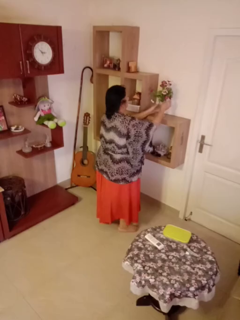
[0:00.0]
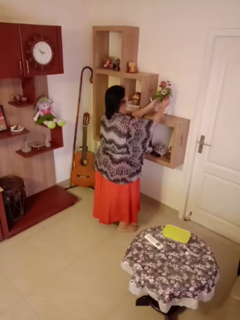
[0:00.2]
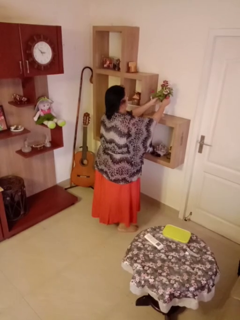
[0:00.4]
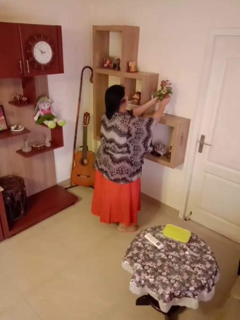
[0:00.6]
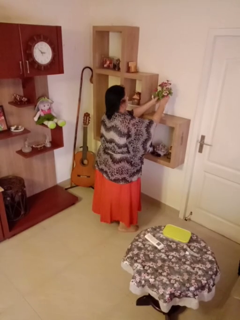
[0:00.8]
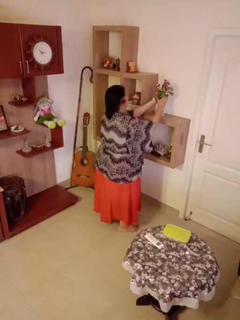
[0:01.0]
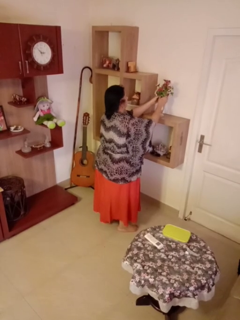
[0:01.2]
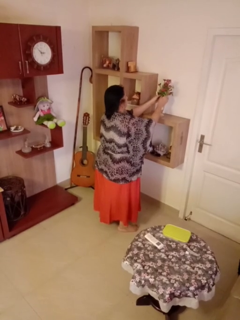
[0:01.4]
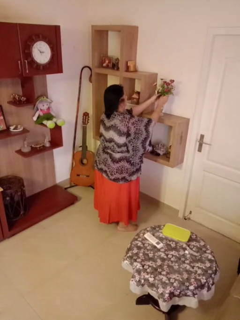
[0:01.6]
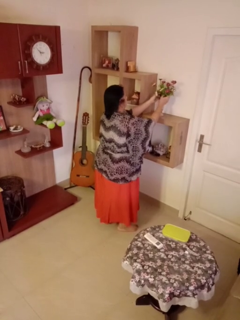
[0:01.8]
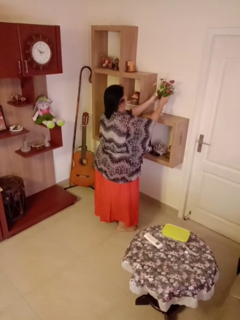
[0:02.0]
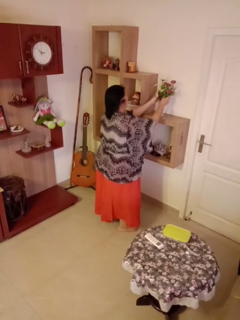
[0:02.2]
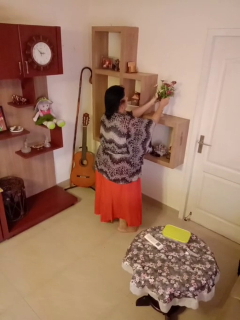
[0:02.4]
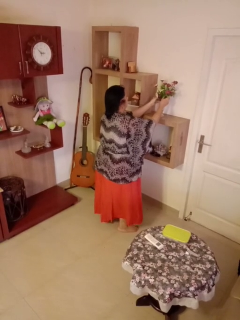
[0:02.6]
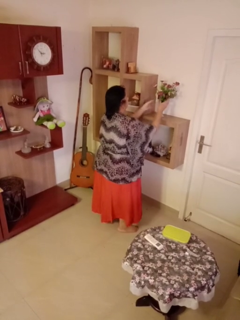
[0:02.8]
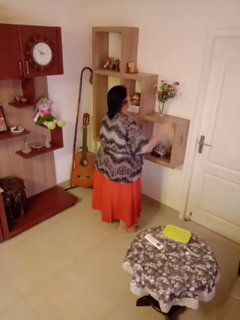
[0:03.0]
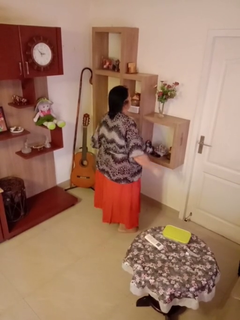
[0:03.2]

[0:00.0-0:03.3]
person arranges flowers in vase

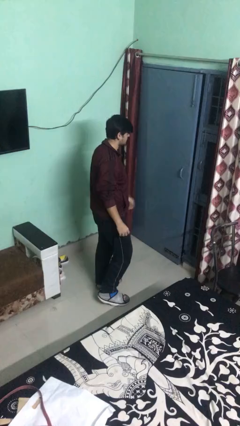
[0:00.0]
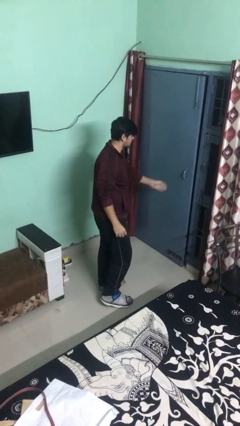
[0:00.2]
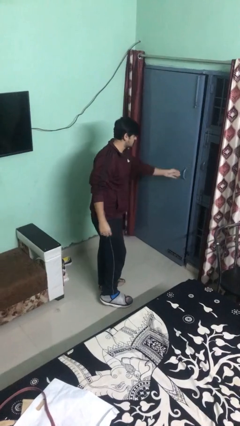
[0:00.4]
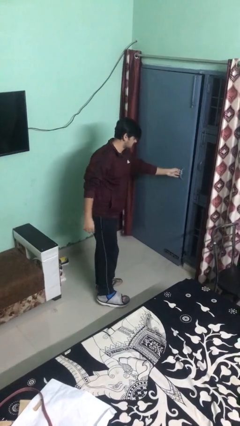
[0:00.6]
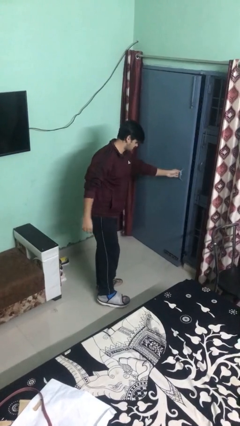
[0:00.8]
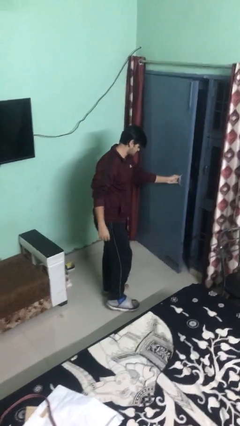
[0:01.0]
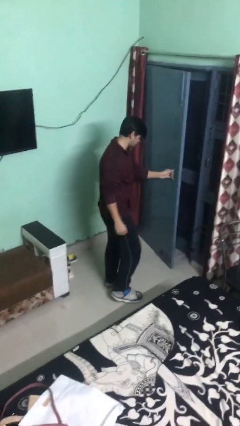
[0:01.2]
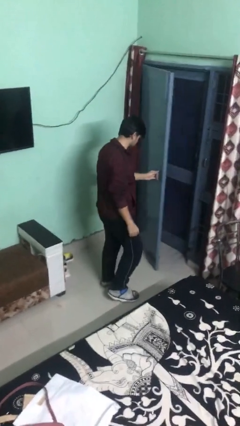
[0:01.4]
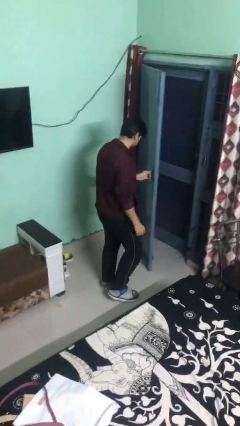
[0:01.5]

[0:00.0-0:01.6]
person opens facility door

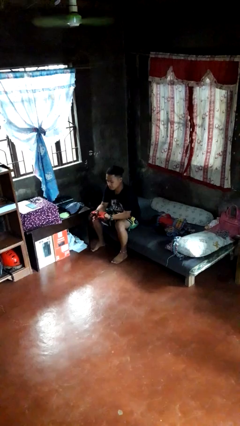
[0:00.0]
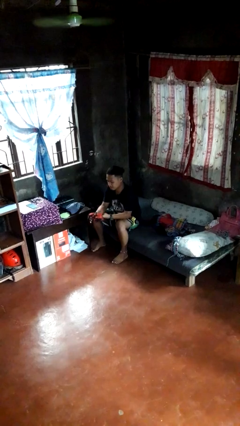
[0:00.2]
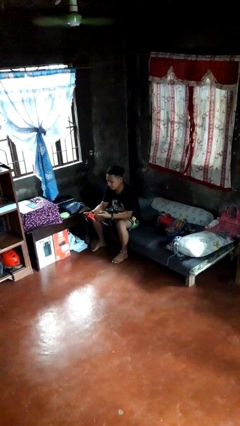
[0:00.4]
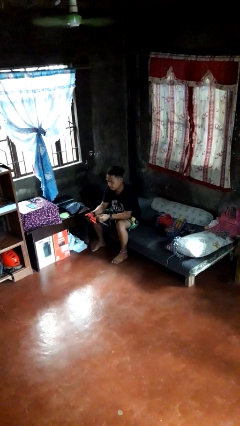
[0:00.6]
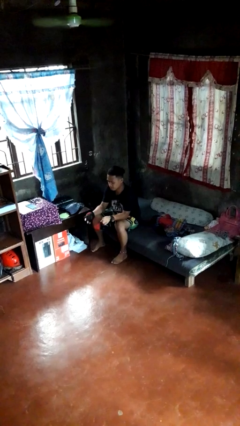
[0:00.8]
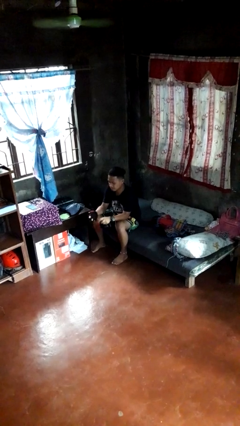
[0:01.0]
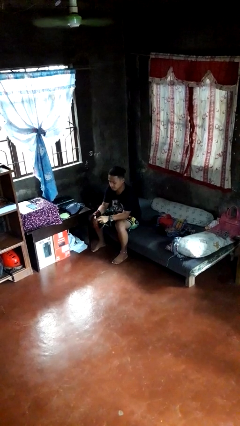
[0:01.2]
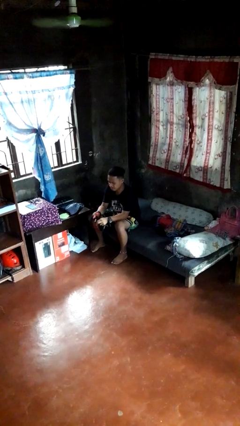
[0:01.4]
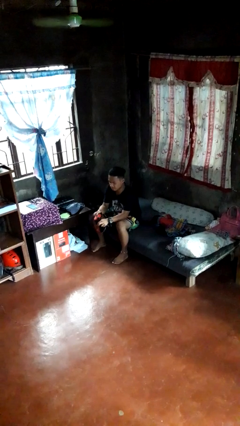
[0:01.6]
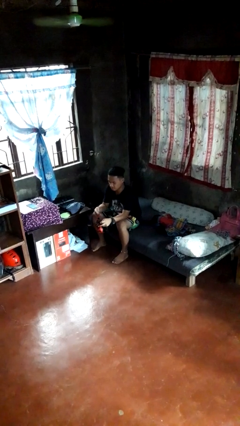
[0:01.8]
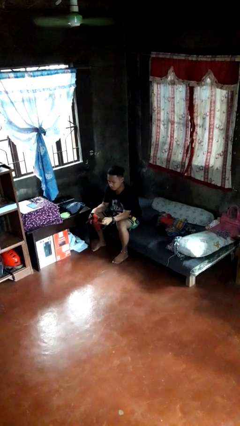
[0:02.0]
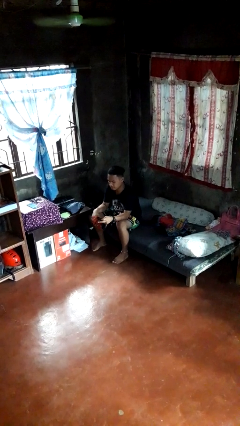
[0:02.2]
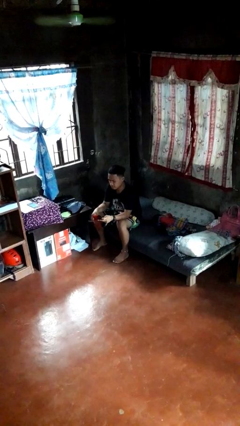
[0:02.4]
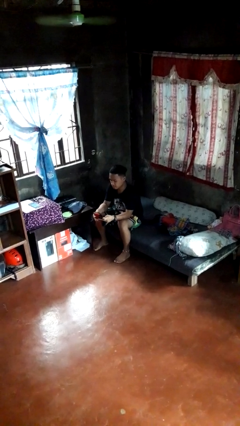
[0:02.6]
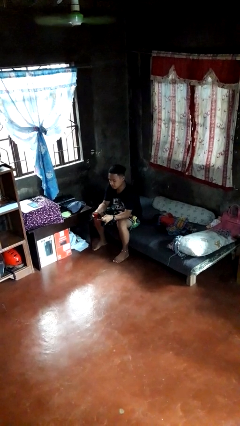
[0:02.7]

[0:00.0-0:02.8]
person takes off gloves

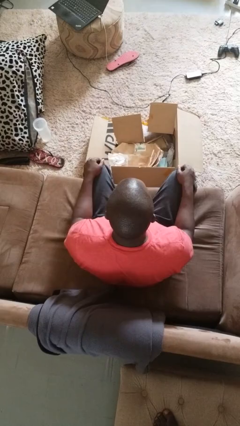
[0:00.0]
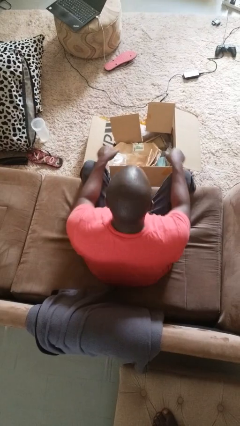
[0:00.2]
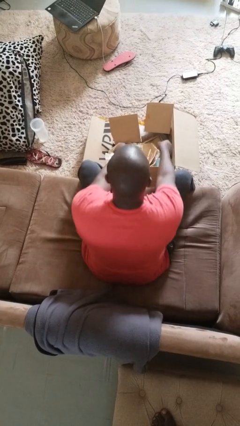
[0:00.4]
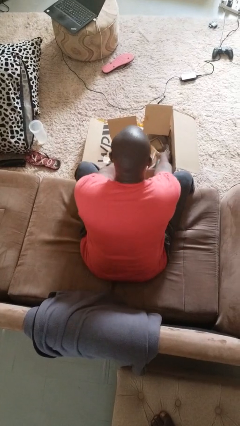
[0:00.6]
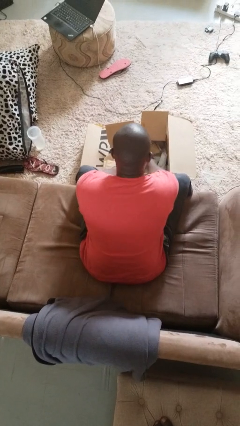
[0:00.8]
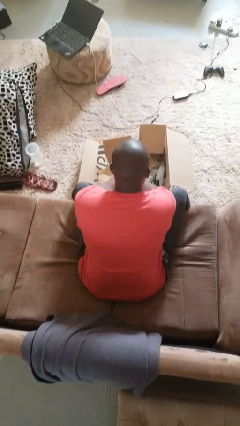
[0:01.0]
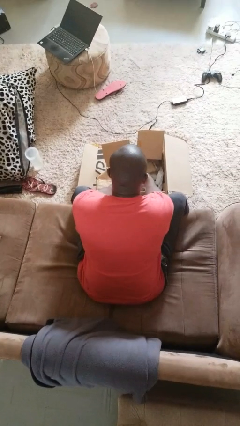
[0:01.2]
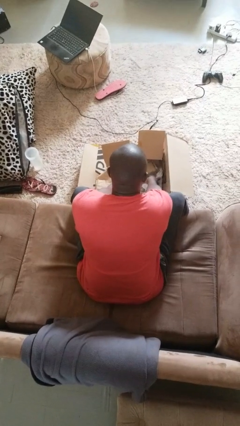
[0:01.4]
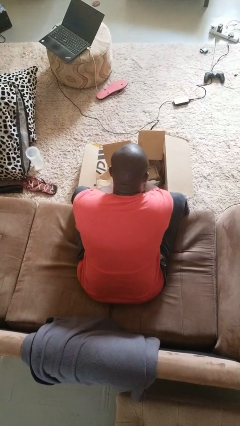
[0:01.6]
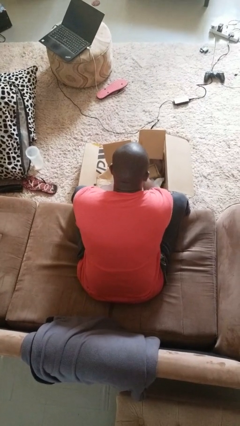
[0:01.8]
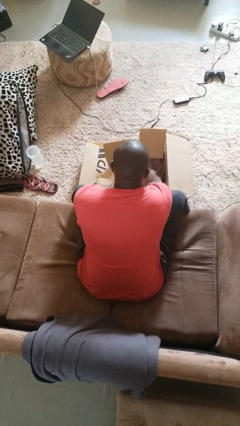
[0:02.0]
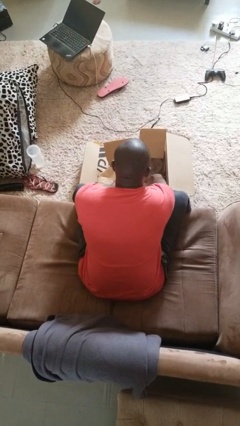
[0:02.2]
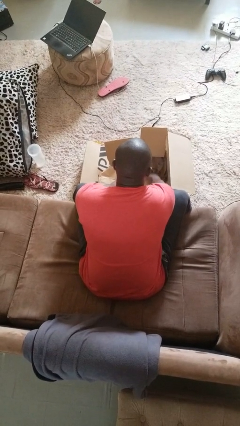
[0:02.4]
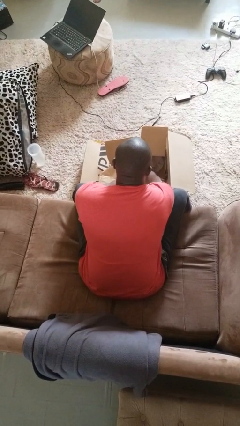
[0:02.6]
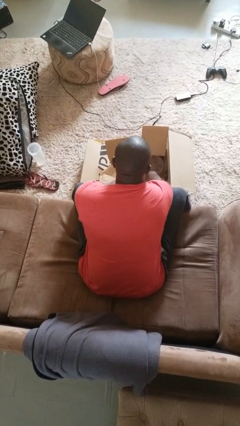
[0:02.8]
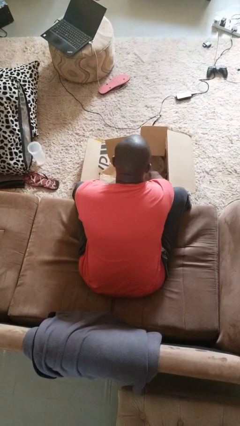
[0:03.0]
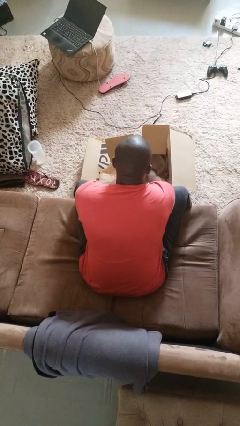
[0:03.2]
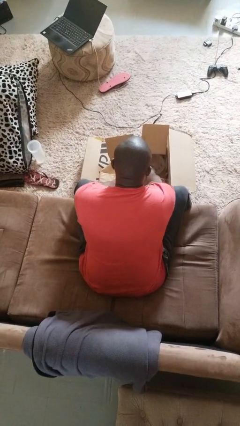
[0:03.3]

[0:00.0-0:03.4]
person searches in box

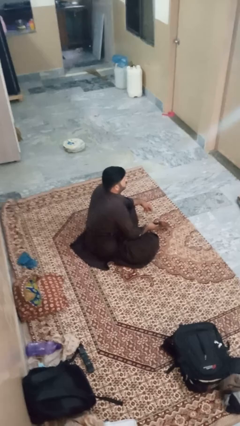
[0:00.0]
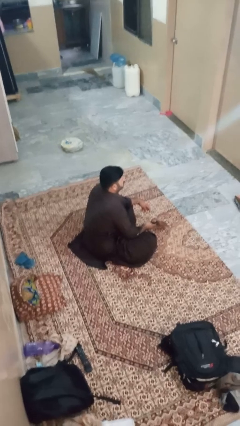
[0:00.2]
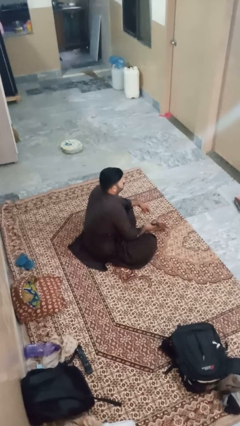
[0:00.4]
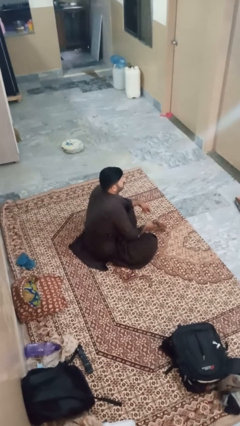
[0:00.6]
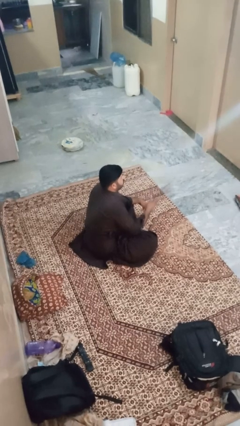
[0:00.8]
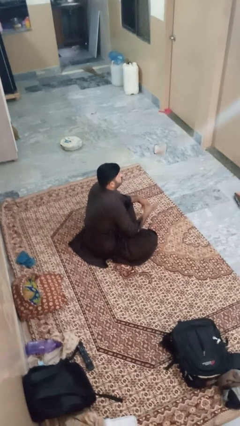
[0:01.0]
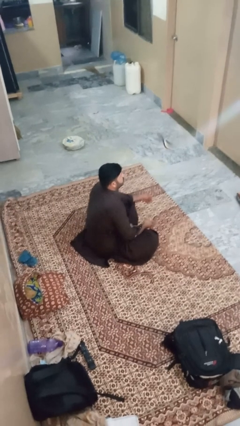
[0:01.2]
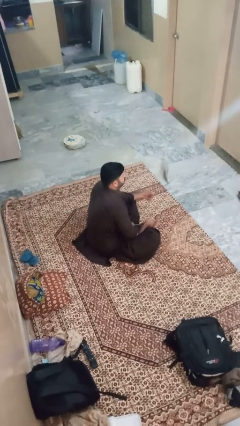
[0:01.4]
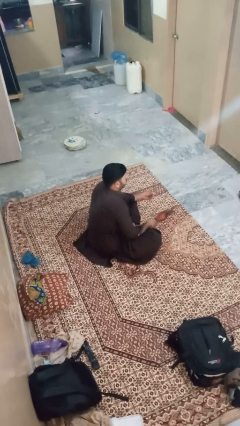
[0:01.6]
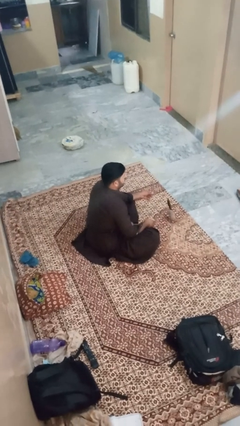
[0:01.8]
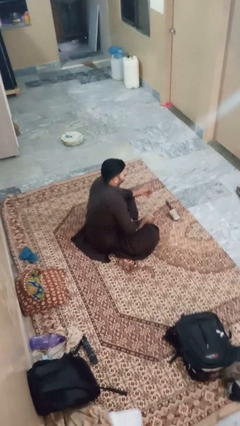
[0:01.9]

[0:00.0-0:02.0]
person throws object into air

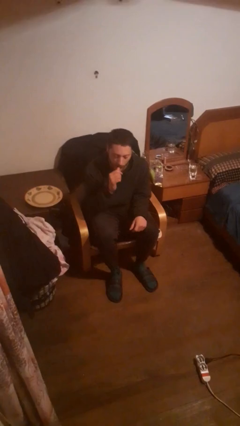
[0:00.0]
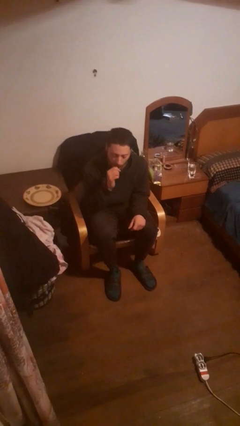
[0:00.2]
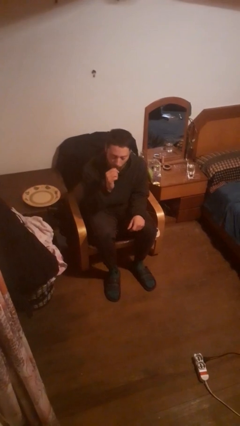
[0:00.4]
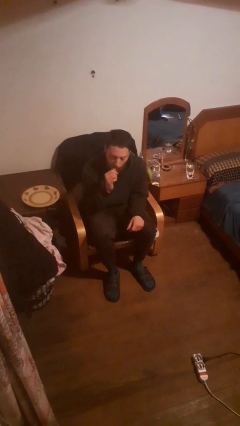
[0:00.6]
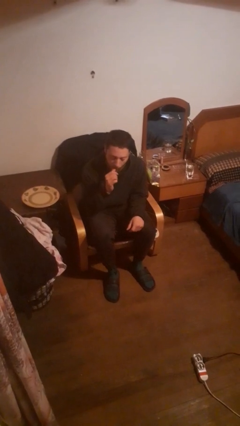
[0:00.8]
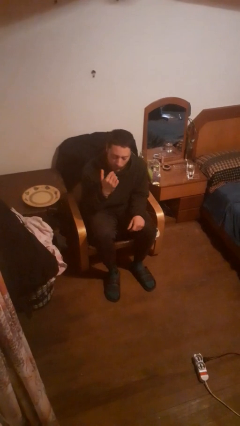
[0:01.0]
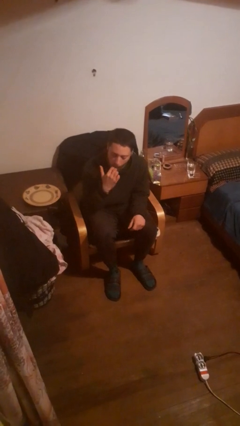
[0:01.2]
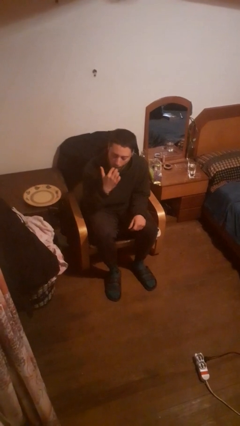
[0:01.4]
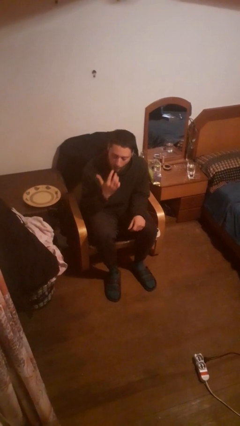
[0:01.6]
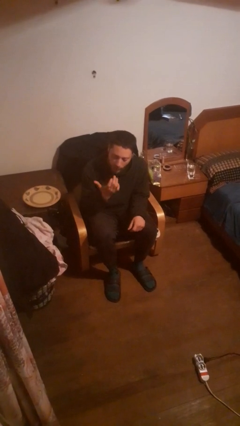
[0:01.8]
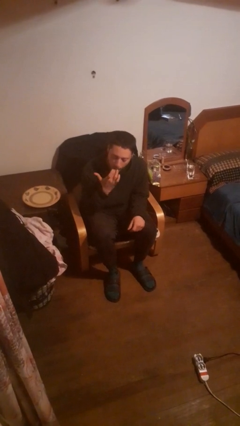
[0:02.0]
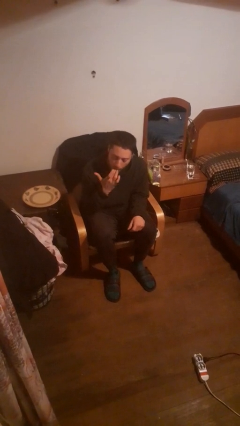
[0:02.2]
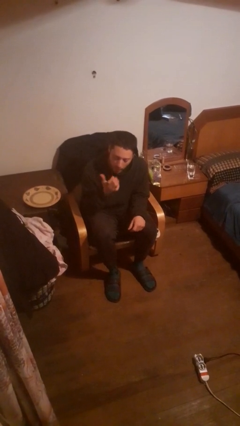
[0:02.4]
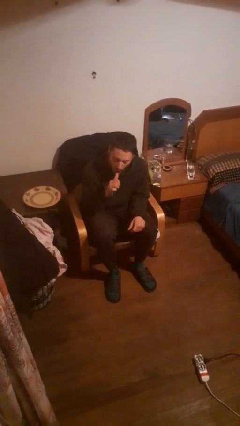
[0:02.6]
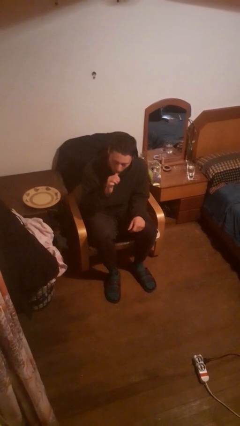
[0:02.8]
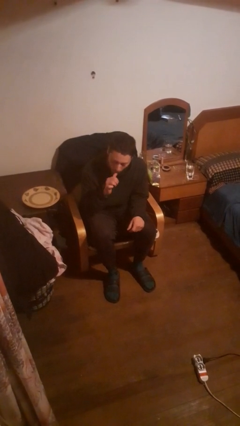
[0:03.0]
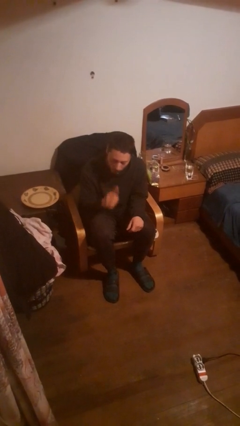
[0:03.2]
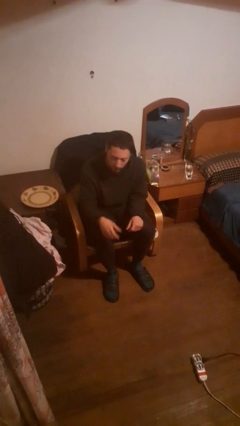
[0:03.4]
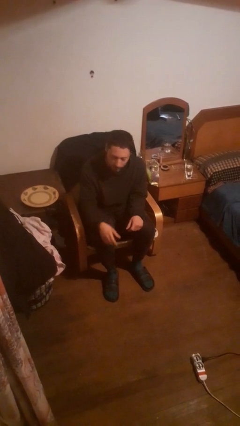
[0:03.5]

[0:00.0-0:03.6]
person licks fingers

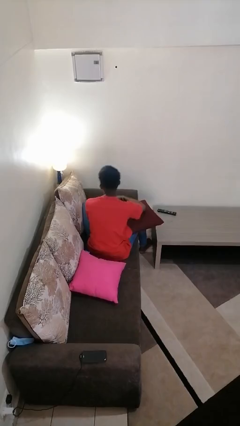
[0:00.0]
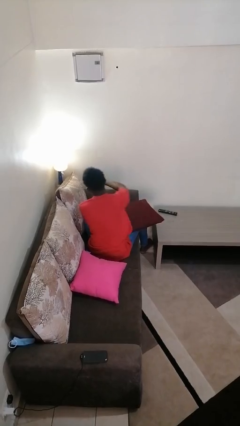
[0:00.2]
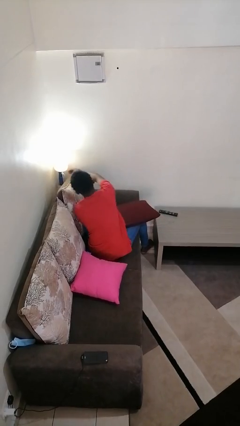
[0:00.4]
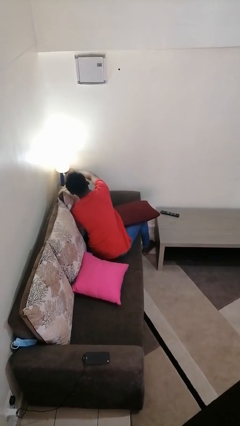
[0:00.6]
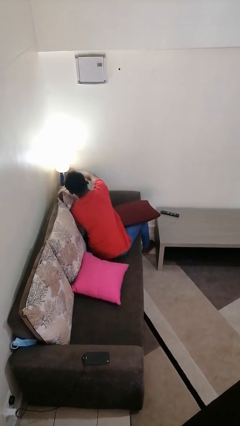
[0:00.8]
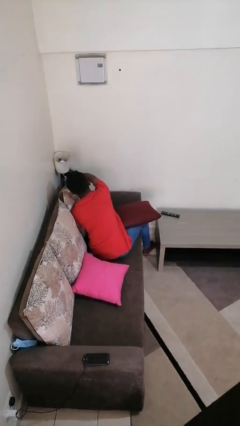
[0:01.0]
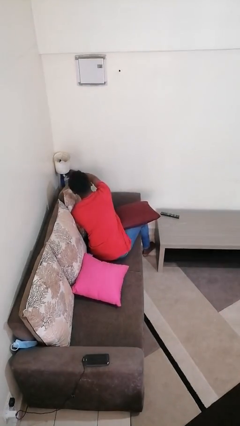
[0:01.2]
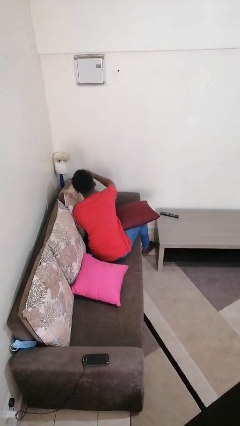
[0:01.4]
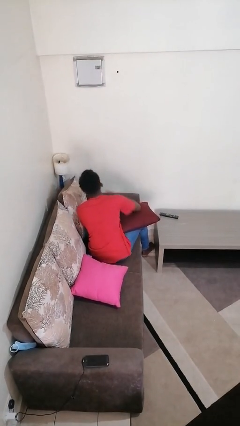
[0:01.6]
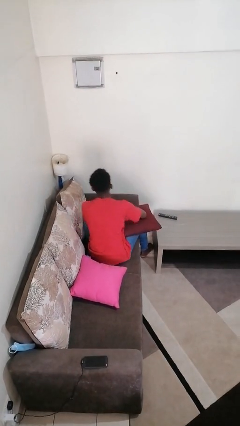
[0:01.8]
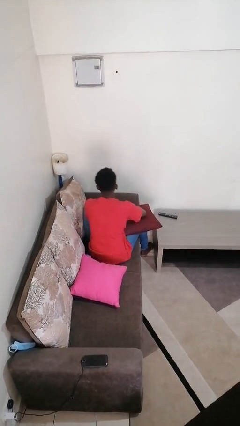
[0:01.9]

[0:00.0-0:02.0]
person turns off lamp
